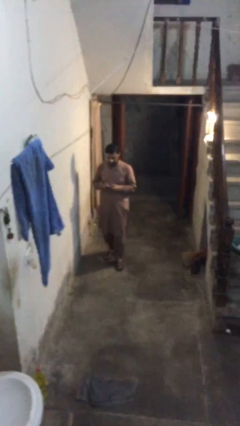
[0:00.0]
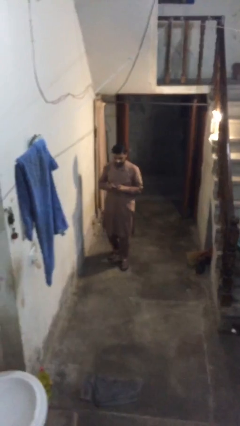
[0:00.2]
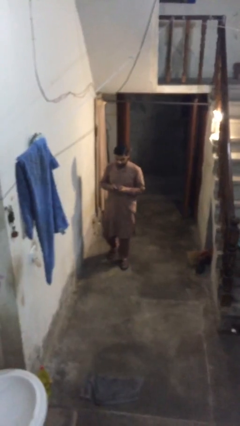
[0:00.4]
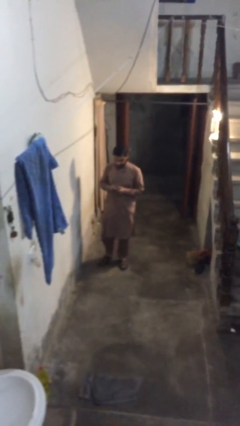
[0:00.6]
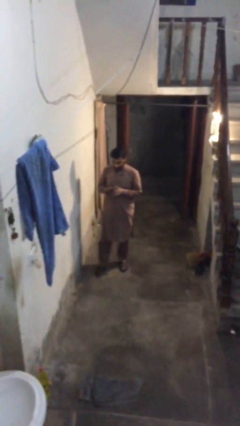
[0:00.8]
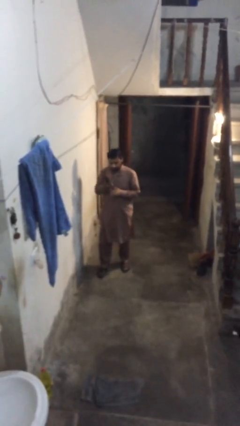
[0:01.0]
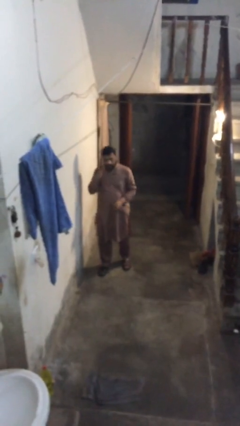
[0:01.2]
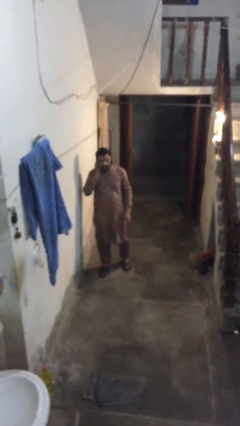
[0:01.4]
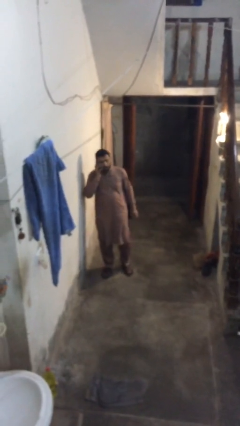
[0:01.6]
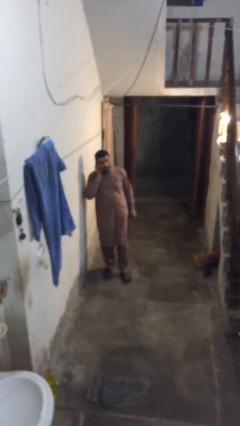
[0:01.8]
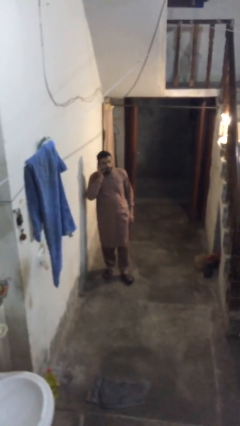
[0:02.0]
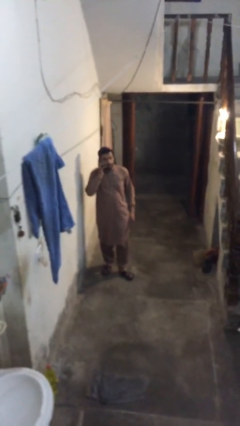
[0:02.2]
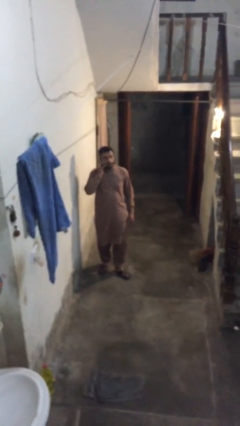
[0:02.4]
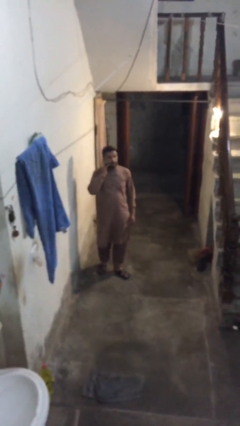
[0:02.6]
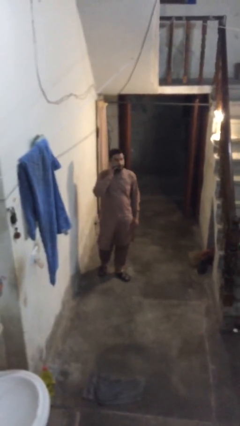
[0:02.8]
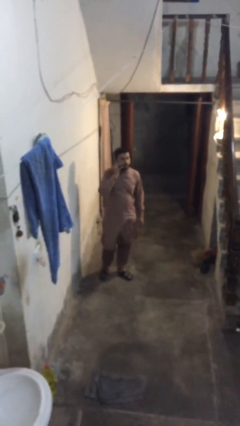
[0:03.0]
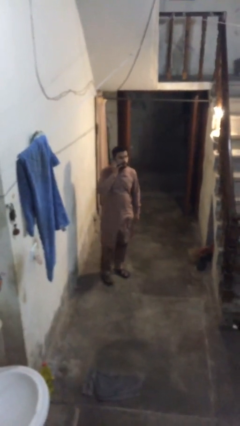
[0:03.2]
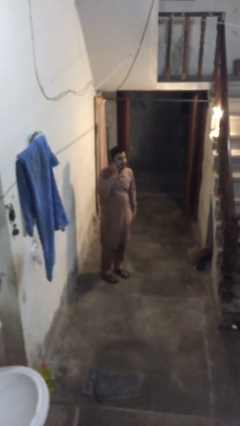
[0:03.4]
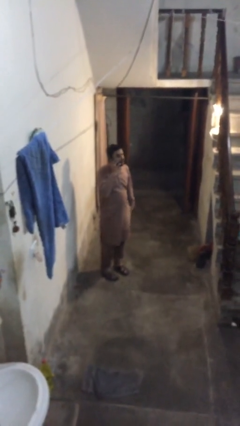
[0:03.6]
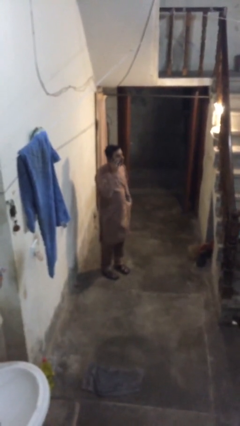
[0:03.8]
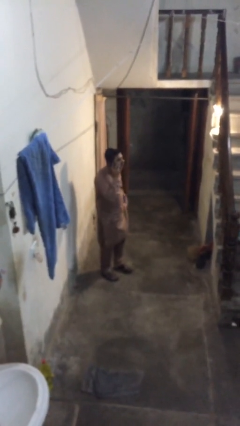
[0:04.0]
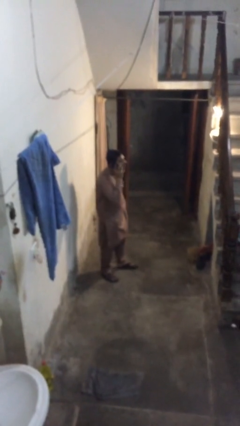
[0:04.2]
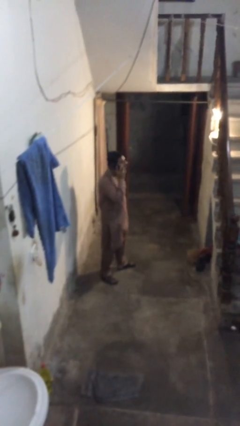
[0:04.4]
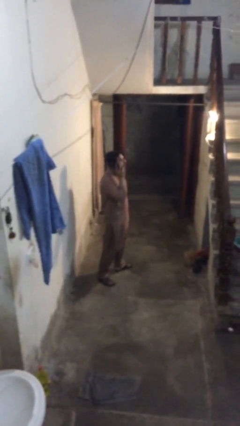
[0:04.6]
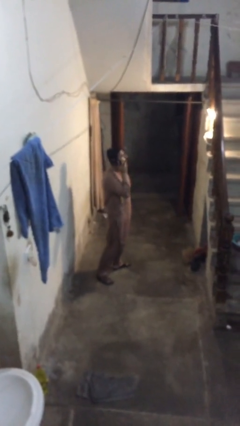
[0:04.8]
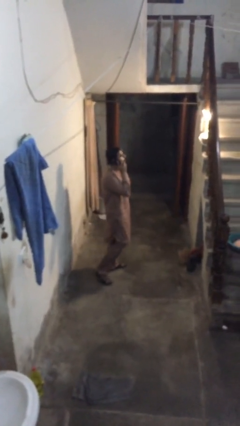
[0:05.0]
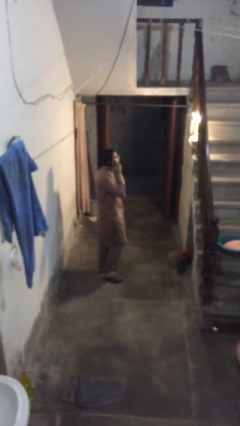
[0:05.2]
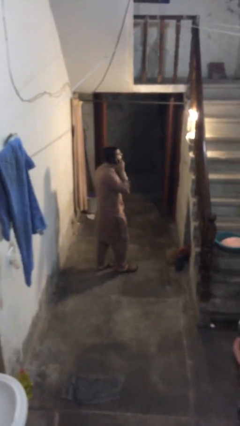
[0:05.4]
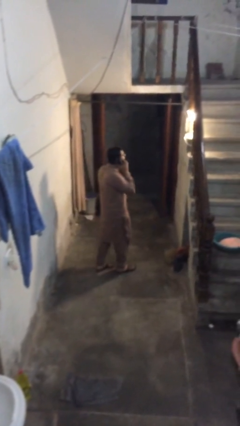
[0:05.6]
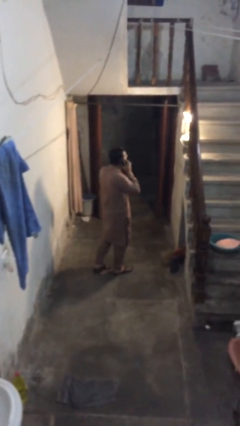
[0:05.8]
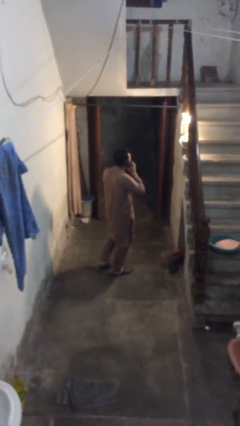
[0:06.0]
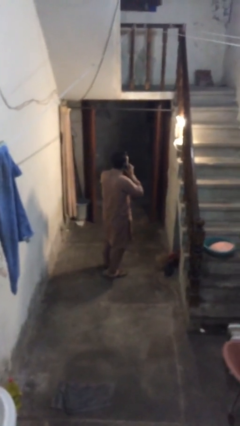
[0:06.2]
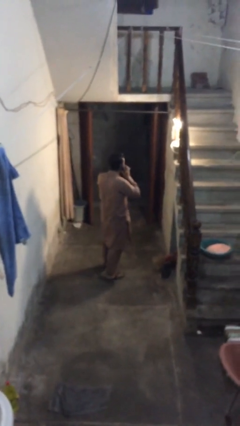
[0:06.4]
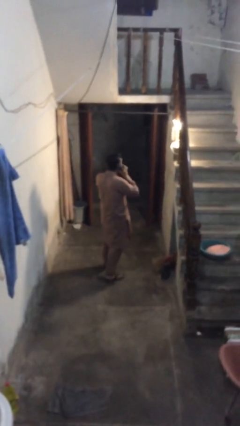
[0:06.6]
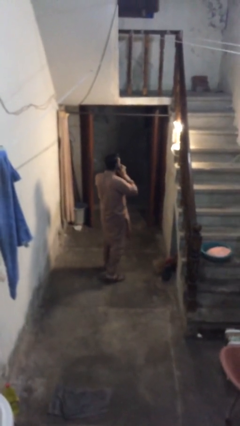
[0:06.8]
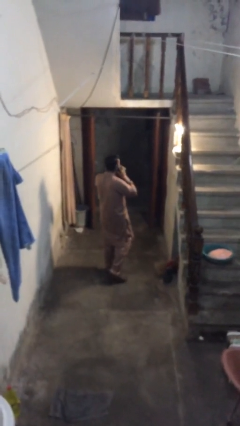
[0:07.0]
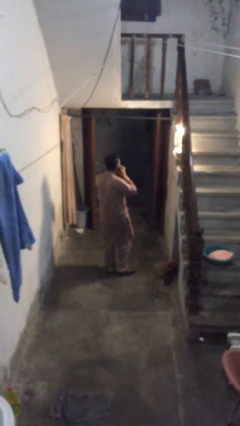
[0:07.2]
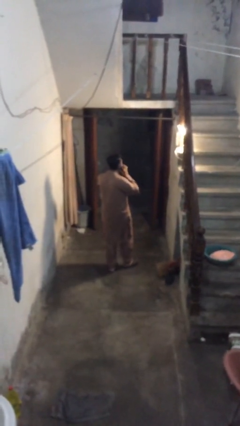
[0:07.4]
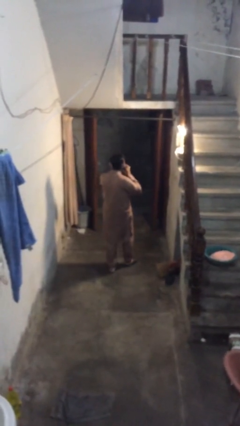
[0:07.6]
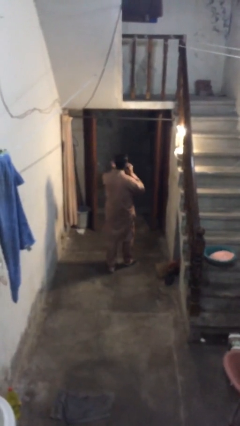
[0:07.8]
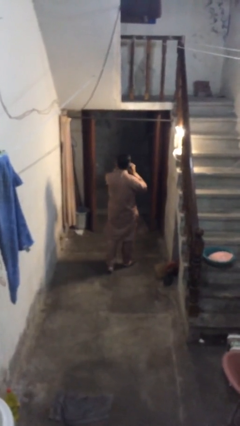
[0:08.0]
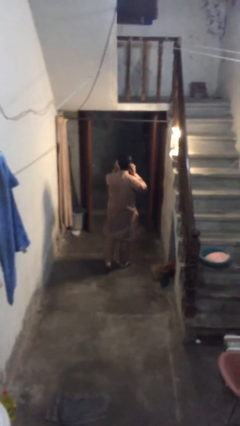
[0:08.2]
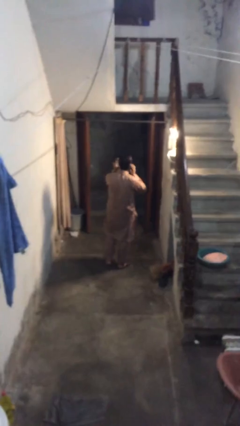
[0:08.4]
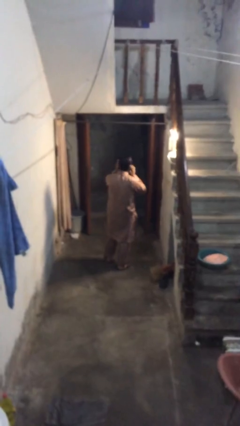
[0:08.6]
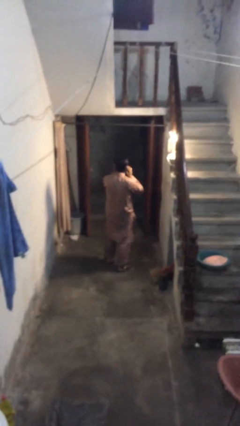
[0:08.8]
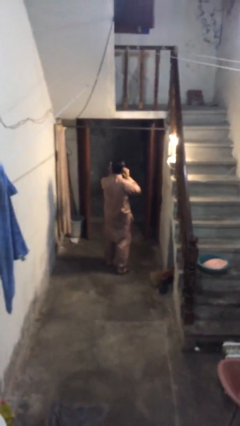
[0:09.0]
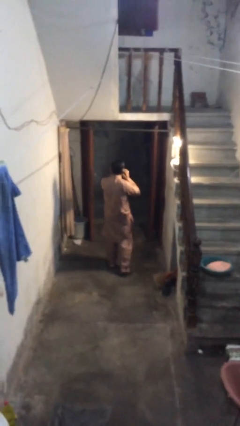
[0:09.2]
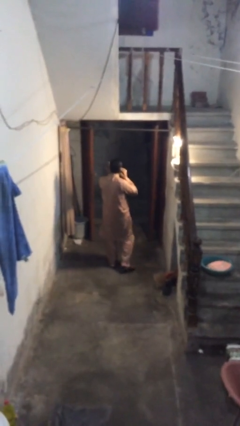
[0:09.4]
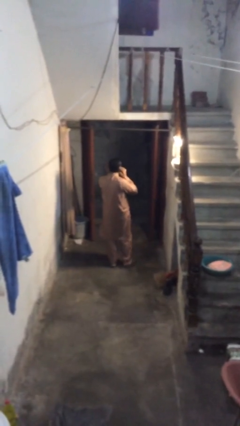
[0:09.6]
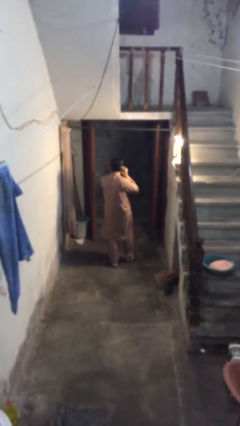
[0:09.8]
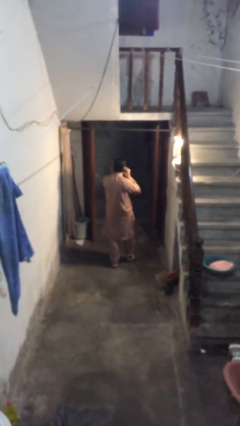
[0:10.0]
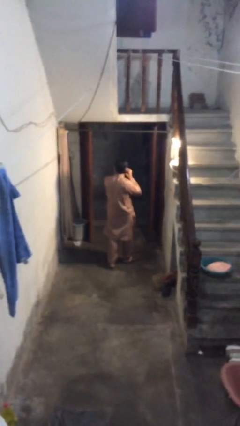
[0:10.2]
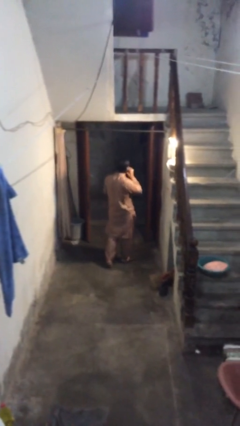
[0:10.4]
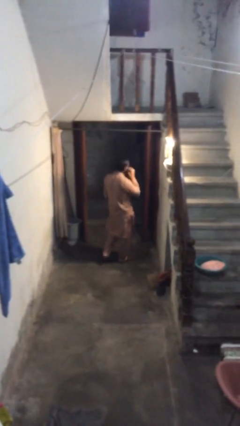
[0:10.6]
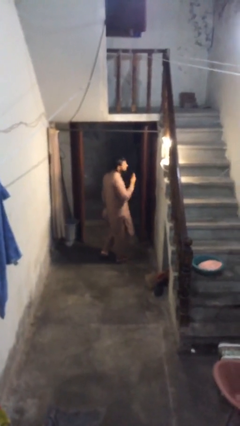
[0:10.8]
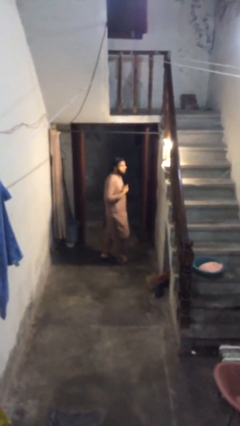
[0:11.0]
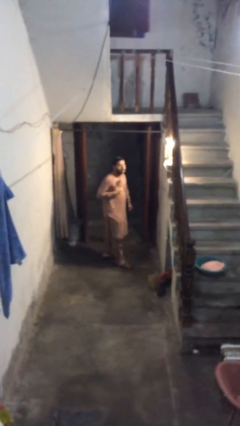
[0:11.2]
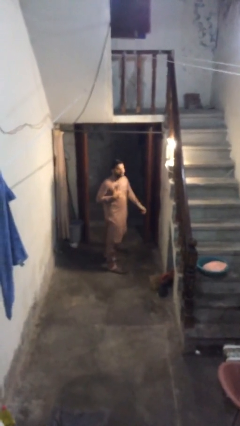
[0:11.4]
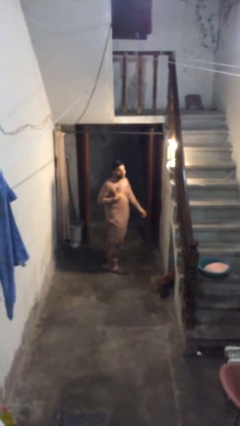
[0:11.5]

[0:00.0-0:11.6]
person talks on phone

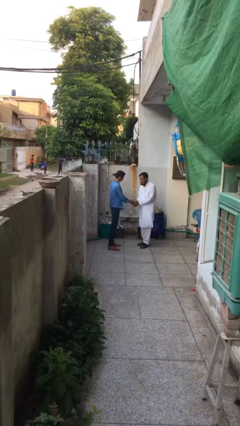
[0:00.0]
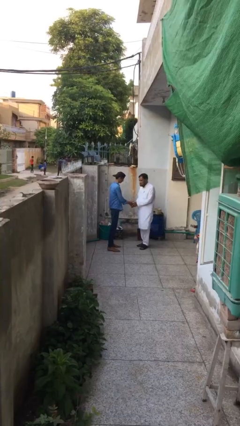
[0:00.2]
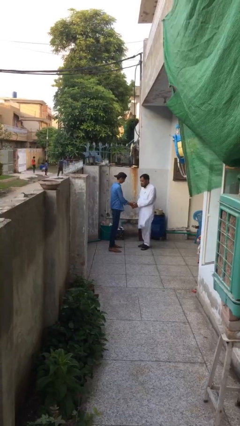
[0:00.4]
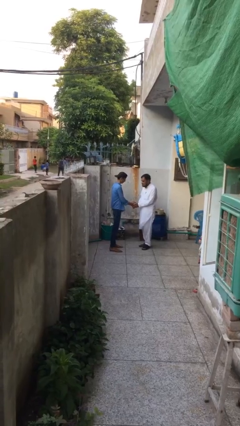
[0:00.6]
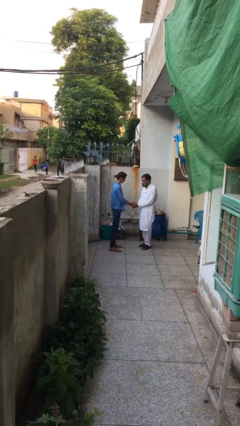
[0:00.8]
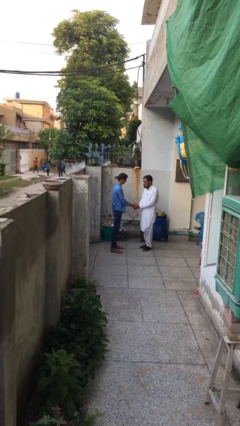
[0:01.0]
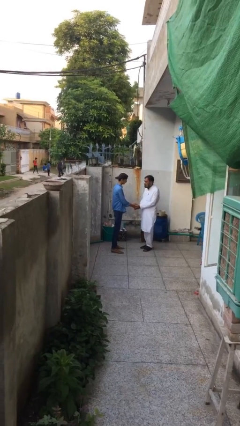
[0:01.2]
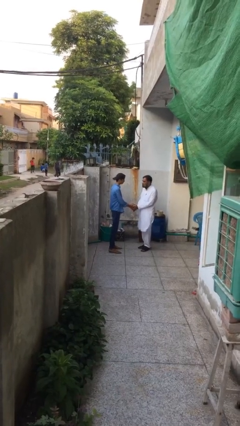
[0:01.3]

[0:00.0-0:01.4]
person shakes hand

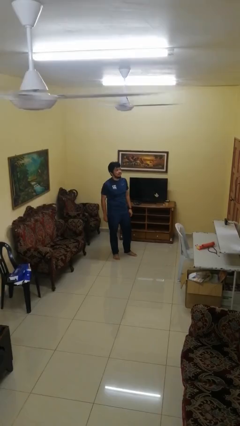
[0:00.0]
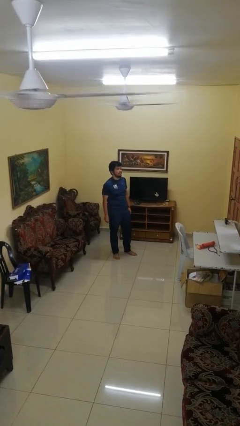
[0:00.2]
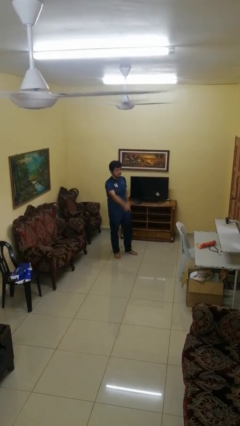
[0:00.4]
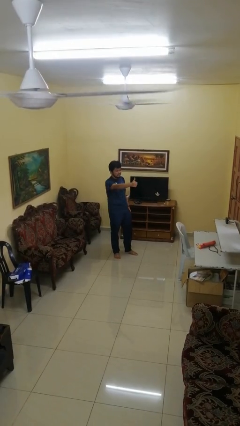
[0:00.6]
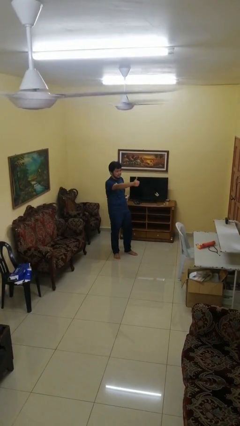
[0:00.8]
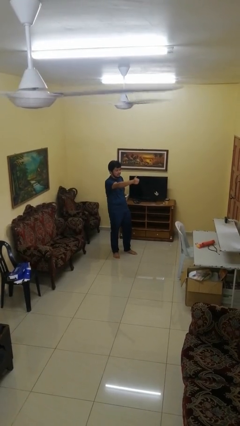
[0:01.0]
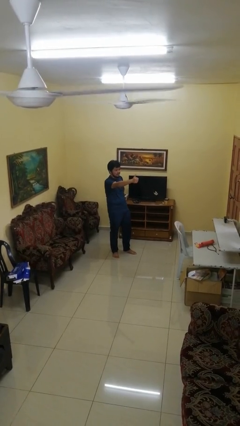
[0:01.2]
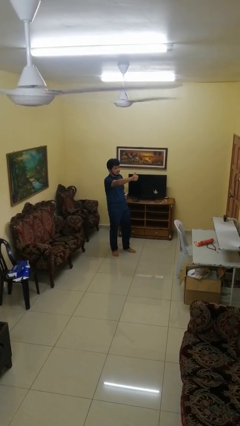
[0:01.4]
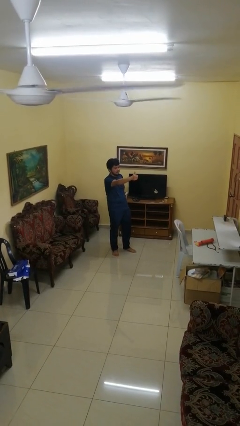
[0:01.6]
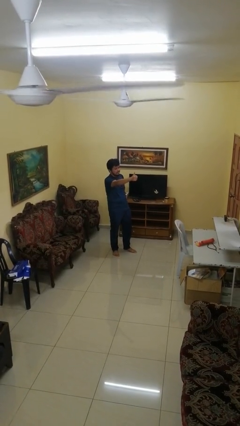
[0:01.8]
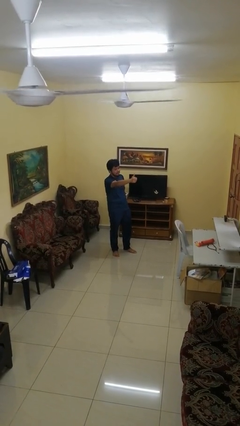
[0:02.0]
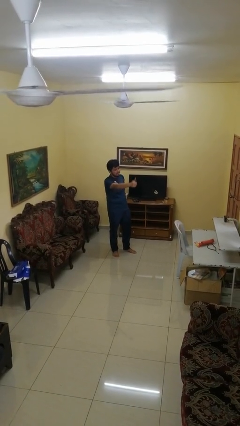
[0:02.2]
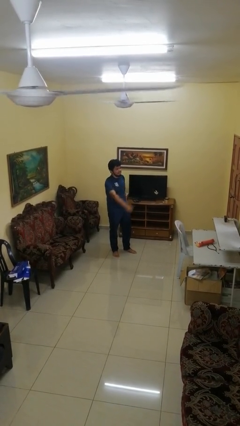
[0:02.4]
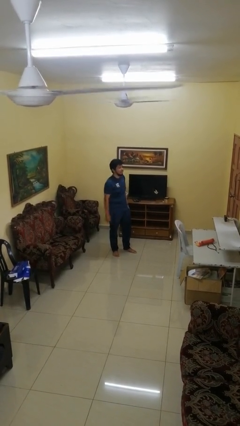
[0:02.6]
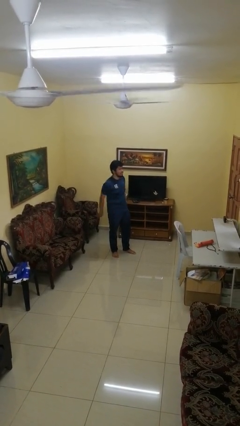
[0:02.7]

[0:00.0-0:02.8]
person gestures thumbs up

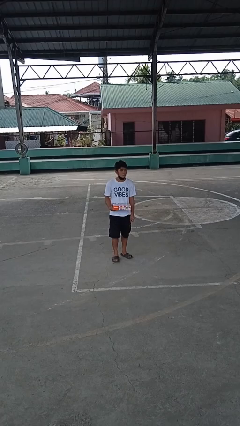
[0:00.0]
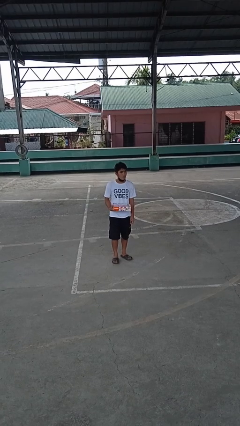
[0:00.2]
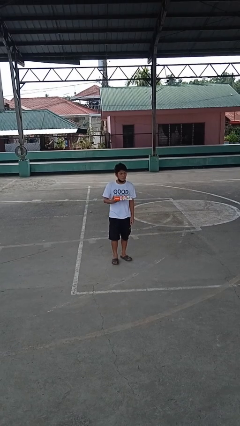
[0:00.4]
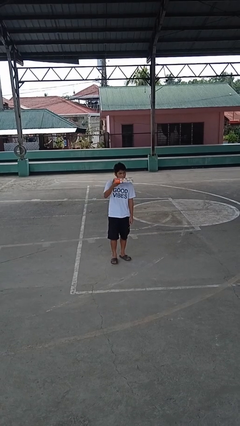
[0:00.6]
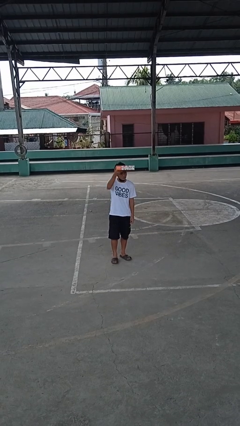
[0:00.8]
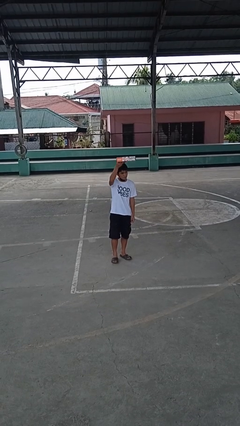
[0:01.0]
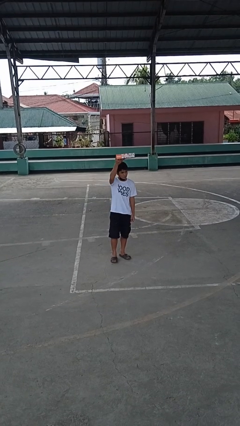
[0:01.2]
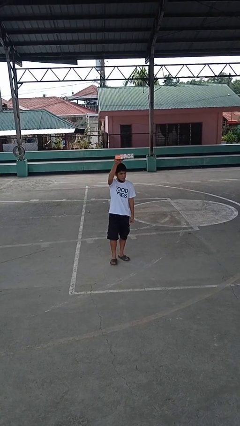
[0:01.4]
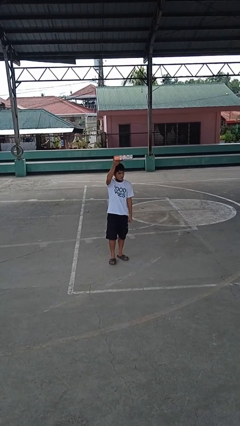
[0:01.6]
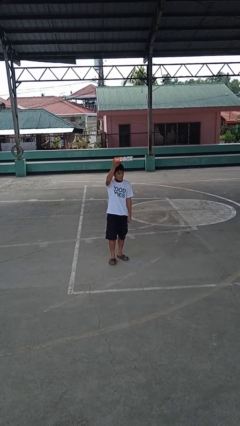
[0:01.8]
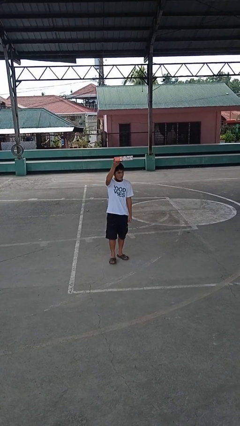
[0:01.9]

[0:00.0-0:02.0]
person holds object above head

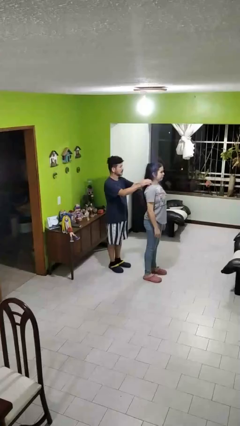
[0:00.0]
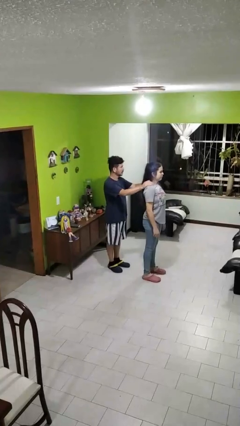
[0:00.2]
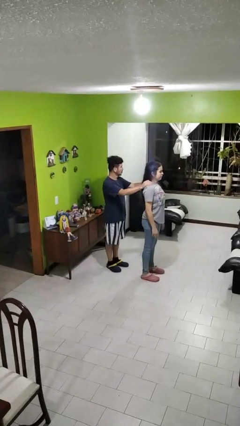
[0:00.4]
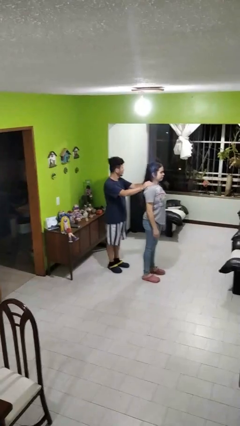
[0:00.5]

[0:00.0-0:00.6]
person grabs person by shoulder
